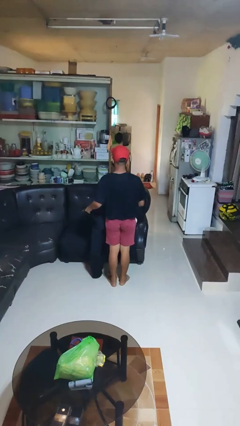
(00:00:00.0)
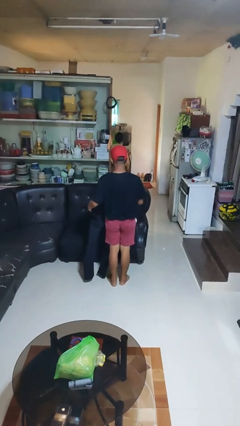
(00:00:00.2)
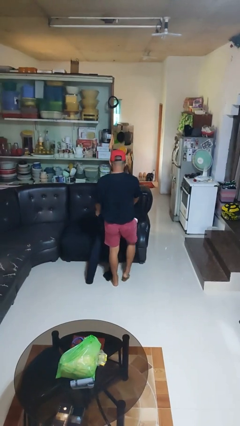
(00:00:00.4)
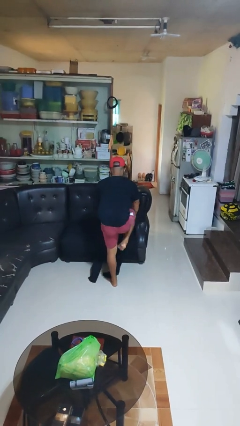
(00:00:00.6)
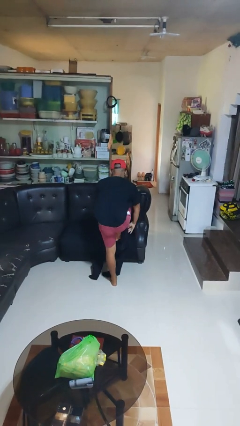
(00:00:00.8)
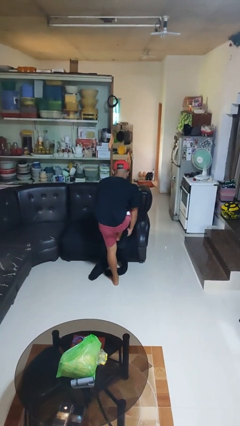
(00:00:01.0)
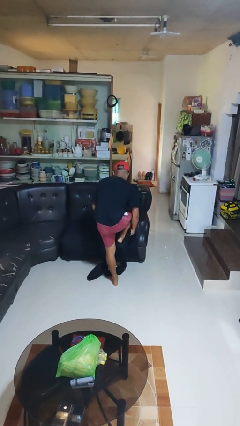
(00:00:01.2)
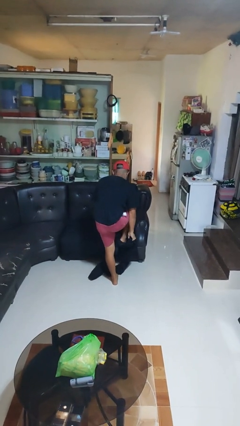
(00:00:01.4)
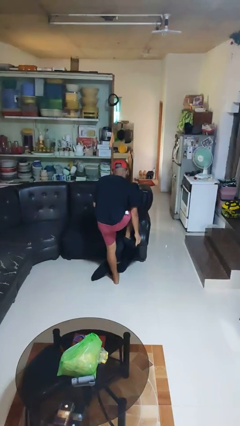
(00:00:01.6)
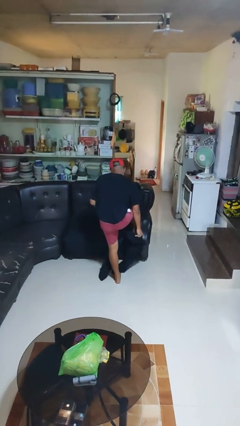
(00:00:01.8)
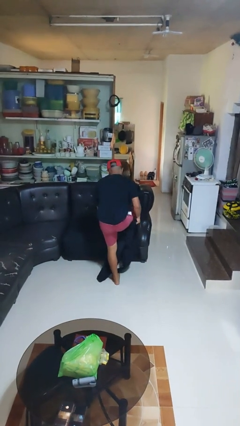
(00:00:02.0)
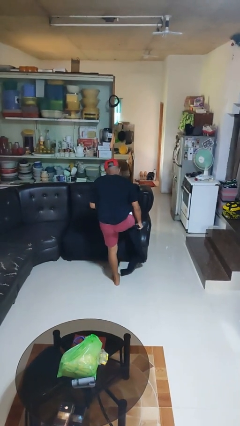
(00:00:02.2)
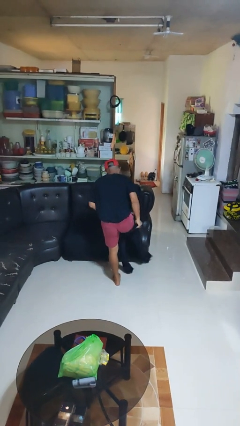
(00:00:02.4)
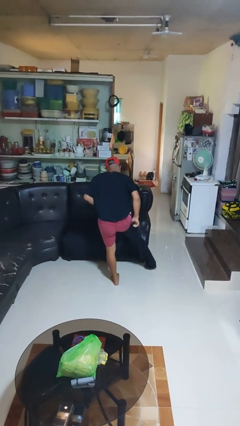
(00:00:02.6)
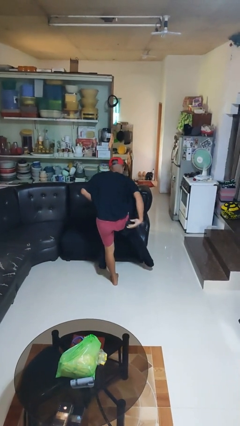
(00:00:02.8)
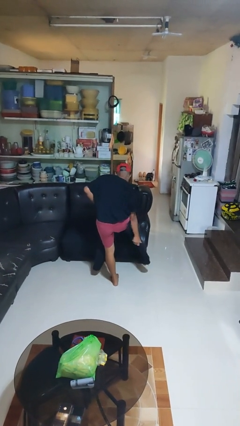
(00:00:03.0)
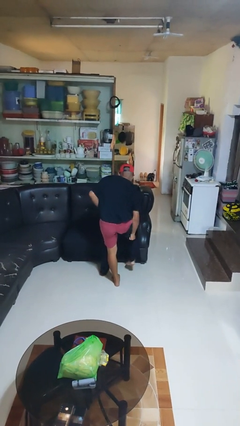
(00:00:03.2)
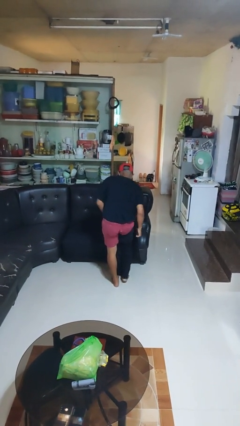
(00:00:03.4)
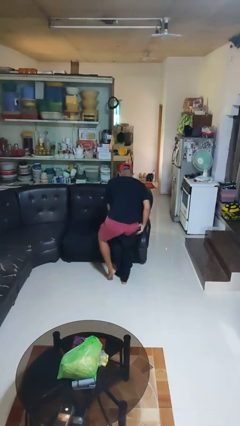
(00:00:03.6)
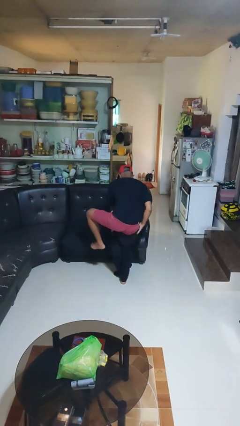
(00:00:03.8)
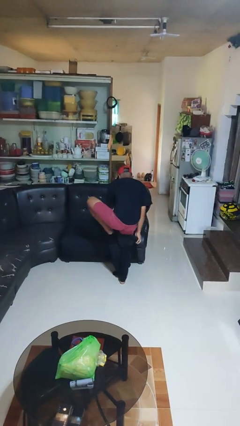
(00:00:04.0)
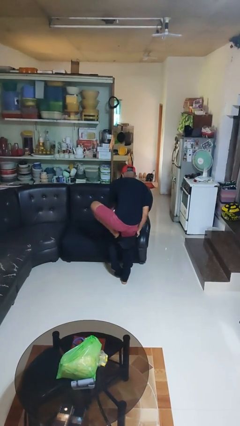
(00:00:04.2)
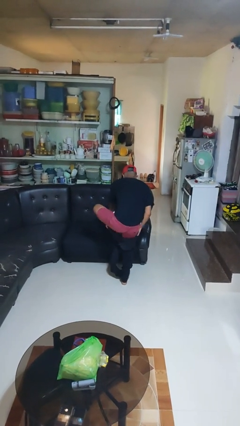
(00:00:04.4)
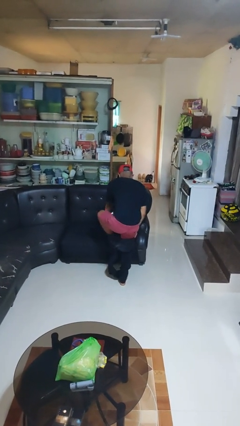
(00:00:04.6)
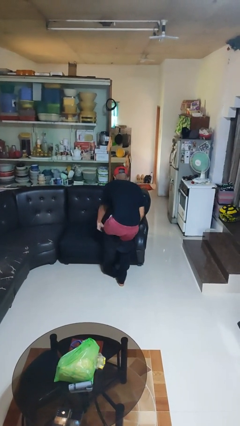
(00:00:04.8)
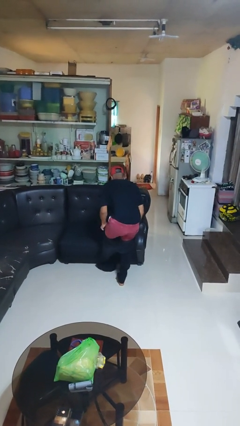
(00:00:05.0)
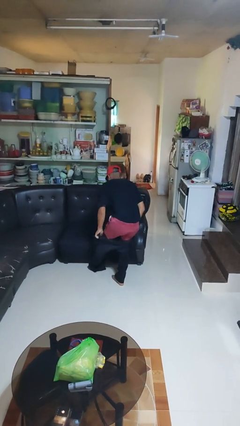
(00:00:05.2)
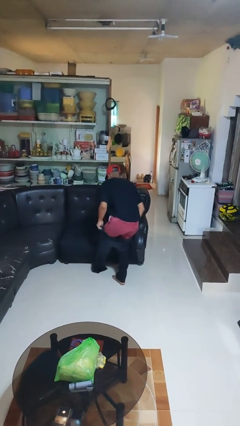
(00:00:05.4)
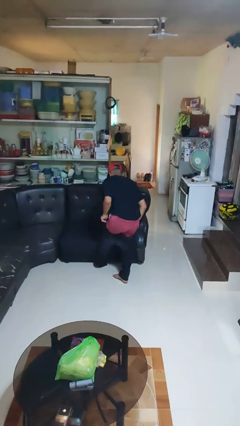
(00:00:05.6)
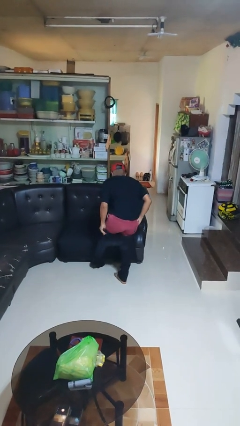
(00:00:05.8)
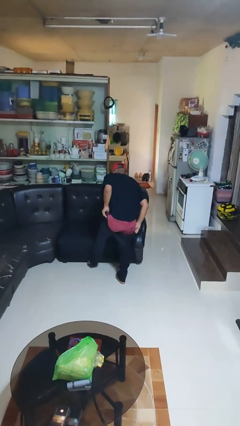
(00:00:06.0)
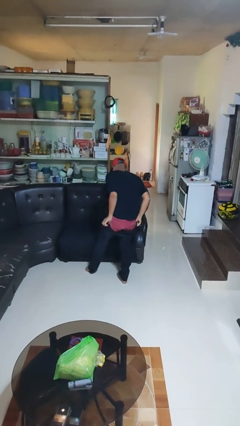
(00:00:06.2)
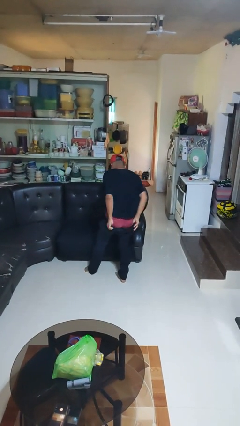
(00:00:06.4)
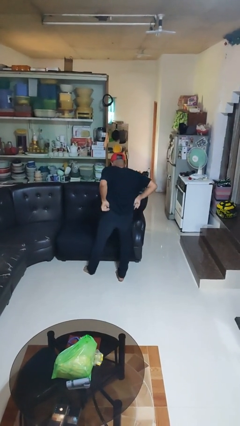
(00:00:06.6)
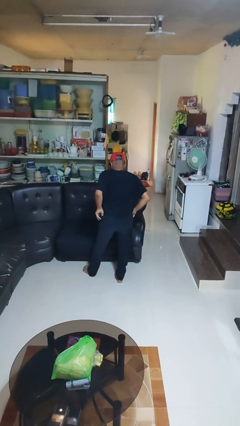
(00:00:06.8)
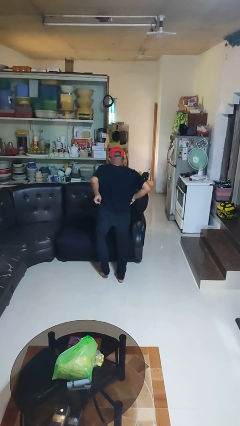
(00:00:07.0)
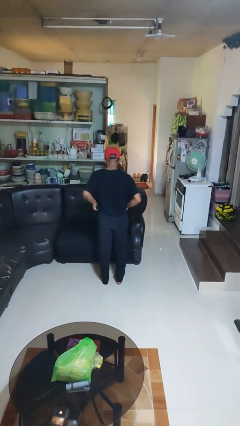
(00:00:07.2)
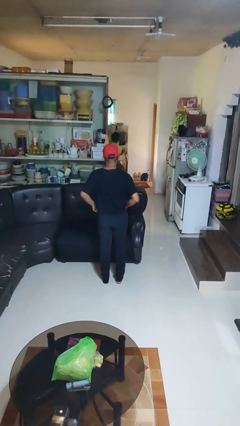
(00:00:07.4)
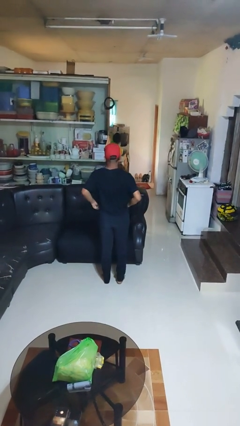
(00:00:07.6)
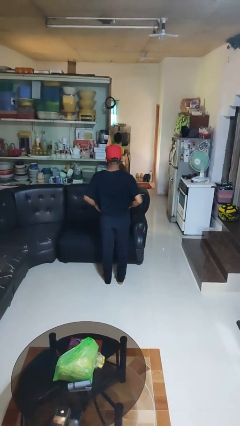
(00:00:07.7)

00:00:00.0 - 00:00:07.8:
person puts on pants

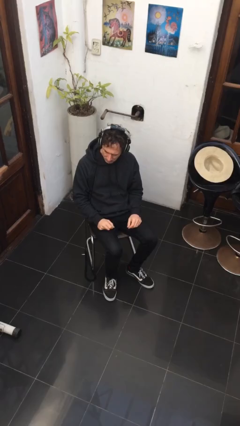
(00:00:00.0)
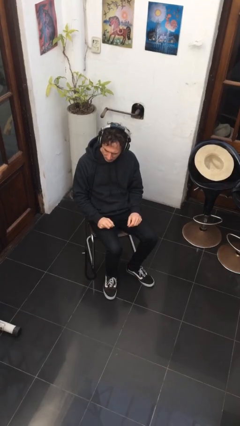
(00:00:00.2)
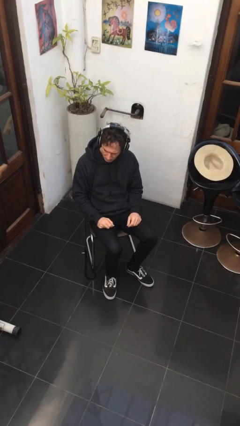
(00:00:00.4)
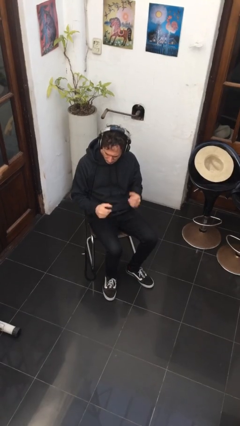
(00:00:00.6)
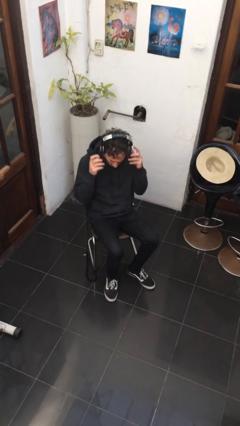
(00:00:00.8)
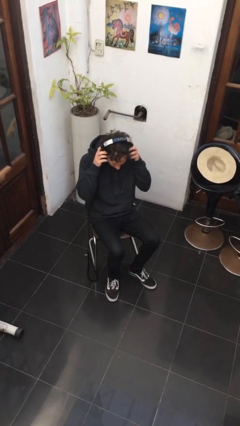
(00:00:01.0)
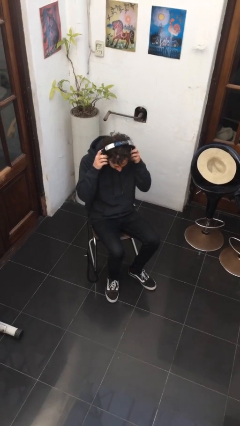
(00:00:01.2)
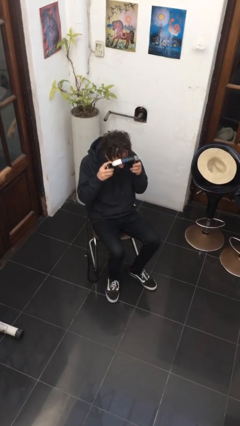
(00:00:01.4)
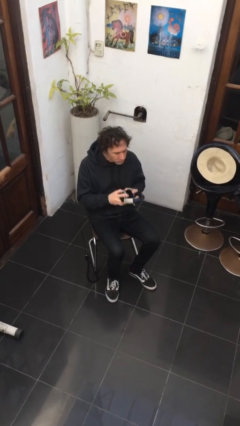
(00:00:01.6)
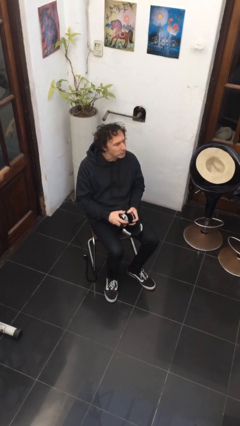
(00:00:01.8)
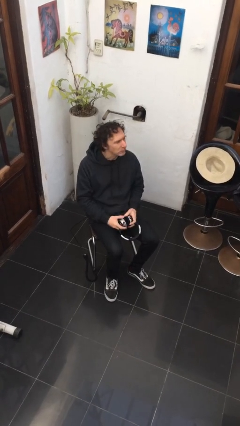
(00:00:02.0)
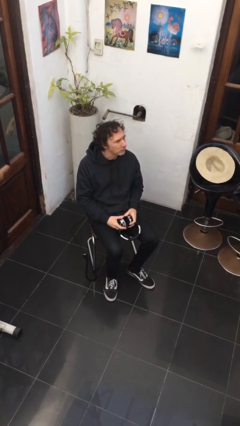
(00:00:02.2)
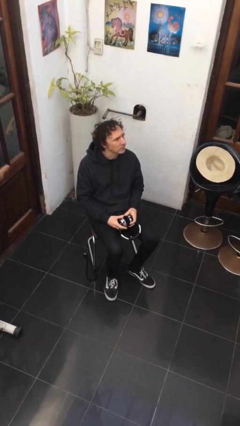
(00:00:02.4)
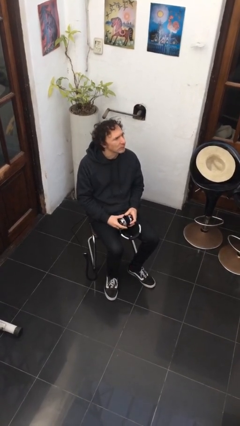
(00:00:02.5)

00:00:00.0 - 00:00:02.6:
person takes off headphones

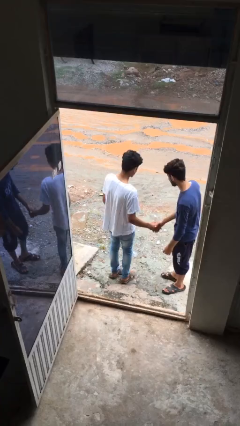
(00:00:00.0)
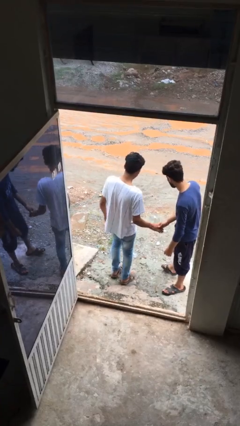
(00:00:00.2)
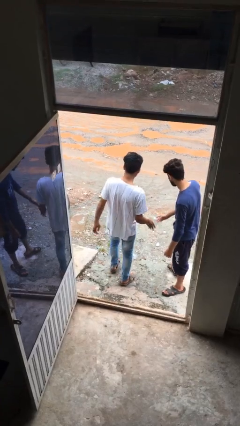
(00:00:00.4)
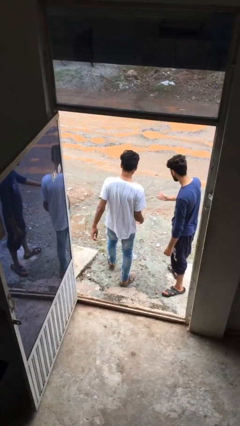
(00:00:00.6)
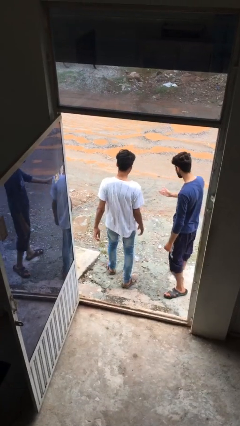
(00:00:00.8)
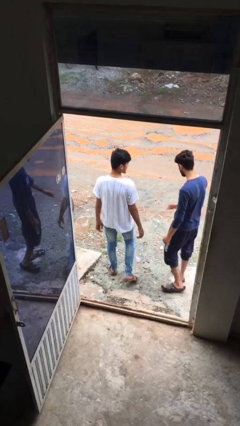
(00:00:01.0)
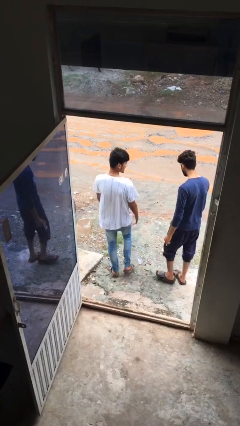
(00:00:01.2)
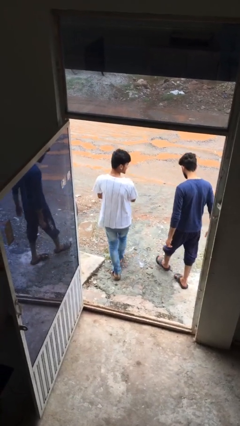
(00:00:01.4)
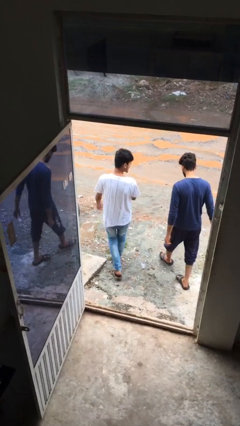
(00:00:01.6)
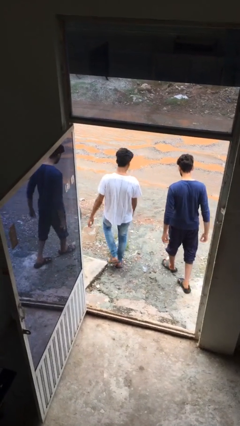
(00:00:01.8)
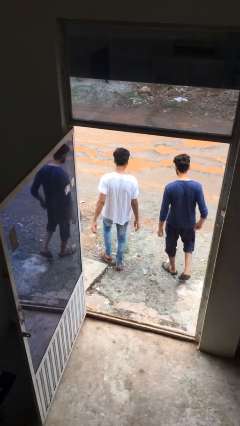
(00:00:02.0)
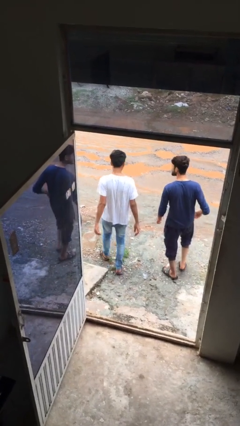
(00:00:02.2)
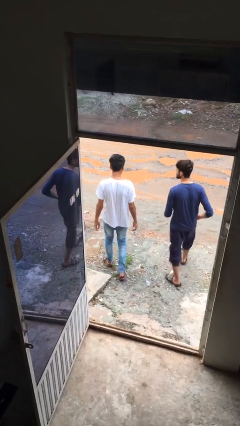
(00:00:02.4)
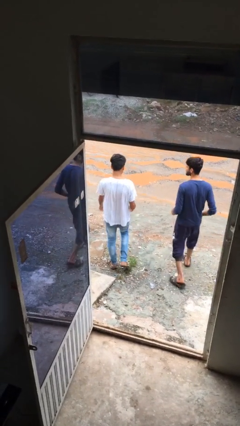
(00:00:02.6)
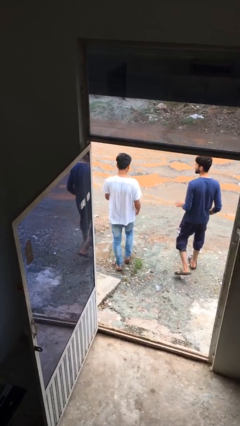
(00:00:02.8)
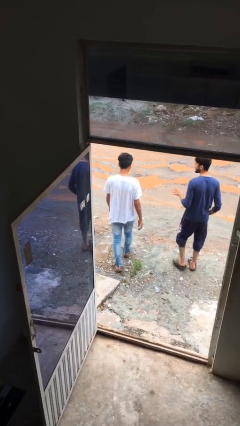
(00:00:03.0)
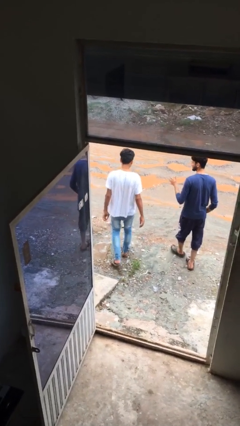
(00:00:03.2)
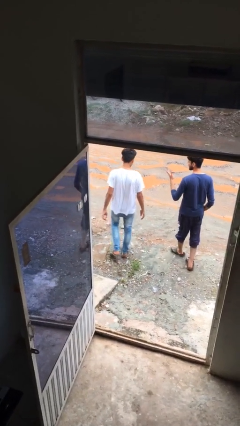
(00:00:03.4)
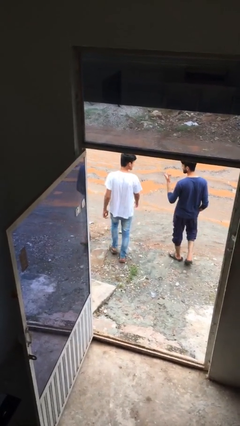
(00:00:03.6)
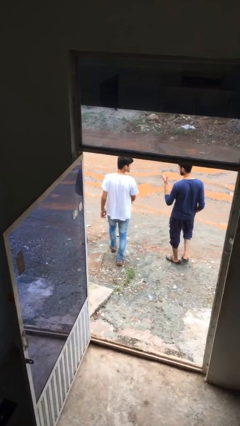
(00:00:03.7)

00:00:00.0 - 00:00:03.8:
person talks to person

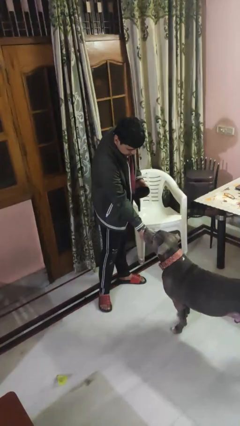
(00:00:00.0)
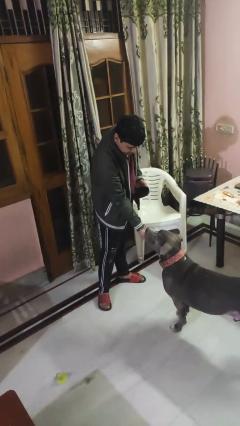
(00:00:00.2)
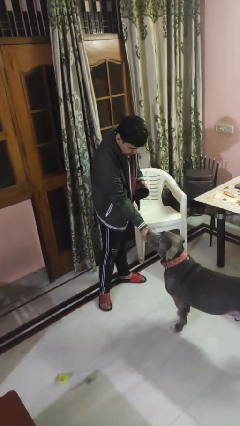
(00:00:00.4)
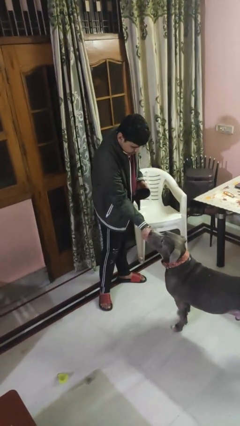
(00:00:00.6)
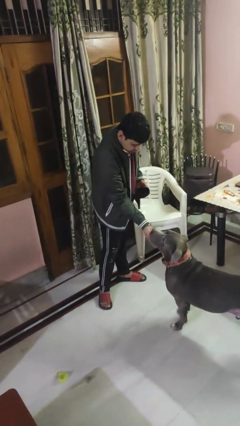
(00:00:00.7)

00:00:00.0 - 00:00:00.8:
person feeds dog

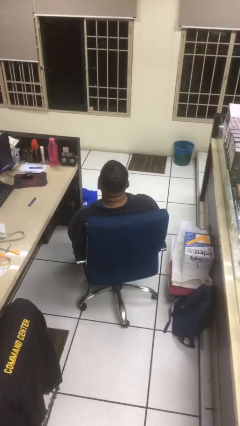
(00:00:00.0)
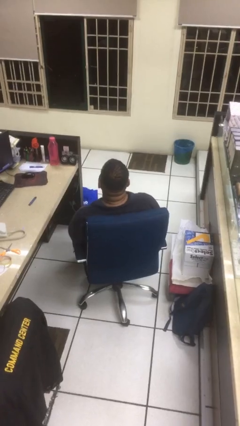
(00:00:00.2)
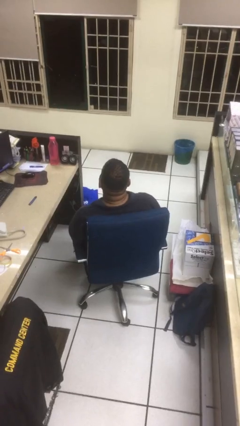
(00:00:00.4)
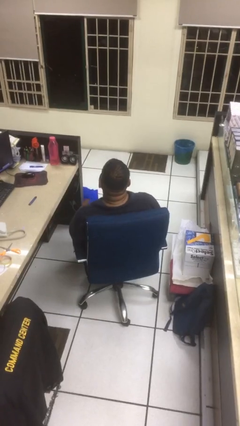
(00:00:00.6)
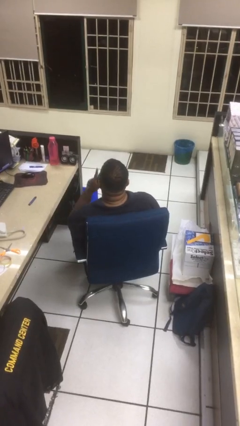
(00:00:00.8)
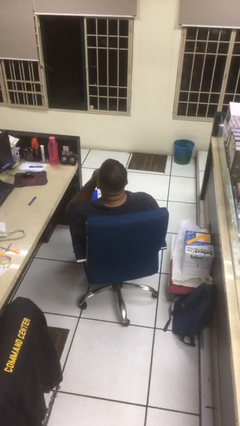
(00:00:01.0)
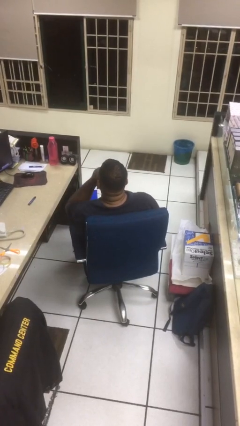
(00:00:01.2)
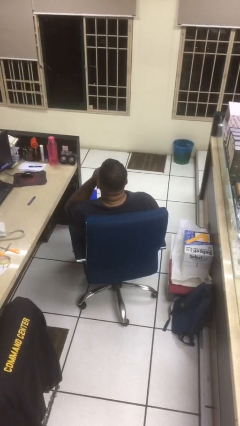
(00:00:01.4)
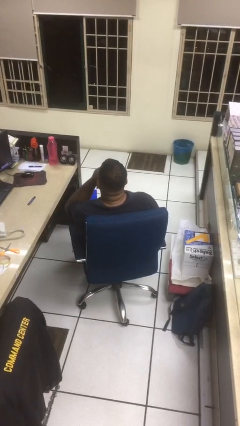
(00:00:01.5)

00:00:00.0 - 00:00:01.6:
person gestures be quiet

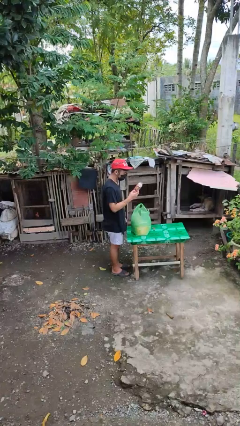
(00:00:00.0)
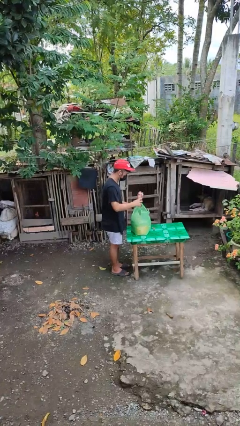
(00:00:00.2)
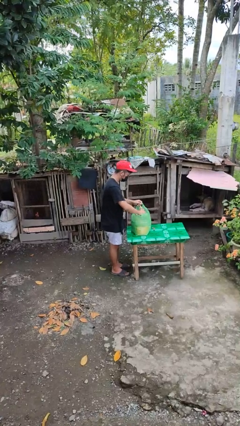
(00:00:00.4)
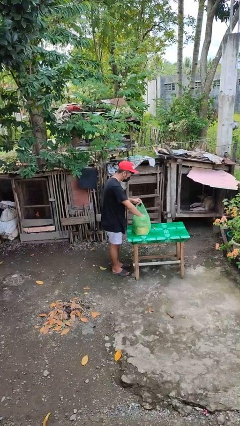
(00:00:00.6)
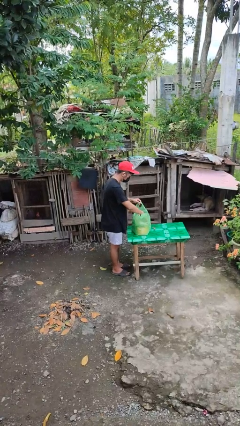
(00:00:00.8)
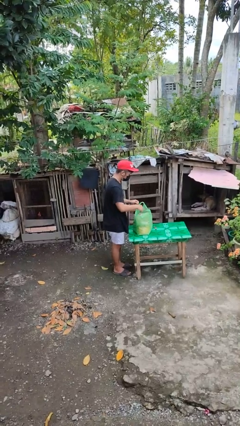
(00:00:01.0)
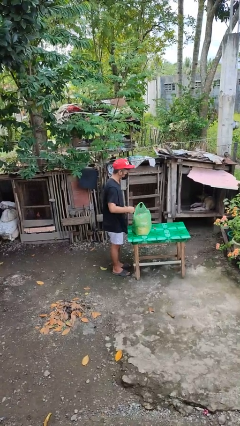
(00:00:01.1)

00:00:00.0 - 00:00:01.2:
person puts object into bag
